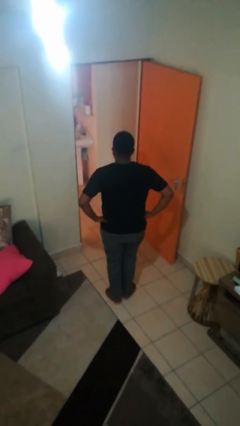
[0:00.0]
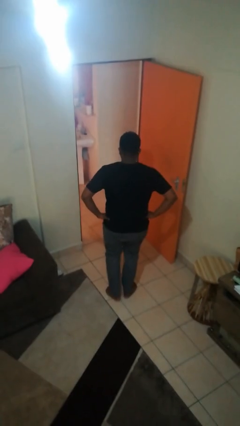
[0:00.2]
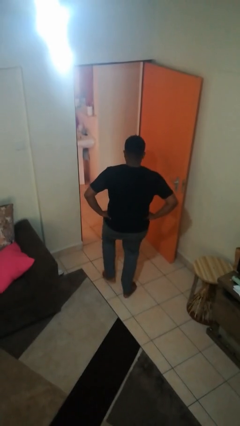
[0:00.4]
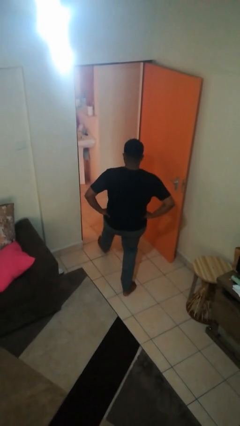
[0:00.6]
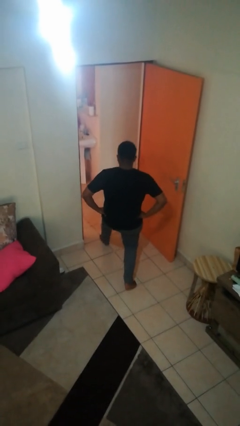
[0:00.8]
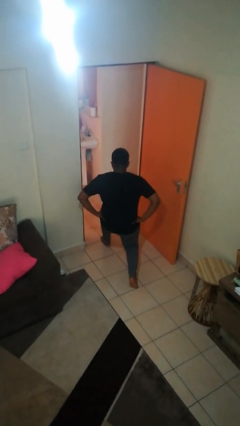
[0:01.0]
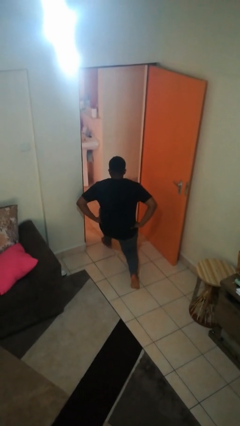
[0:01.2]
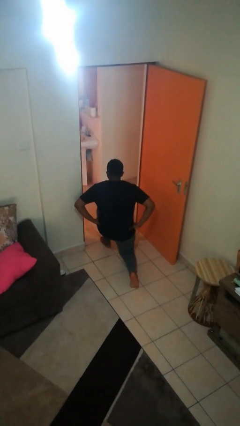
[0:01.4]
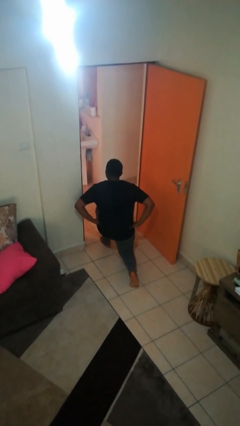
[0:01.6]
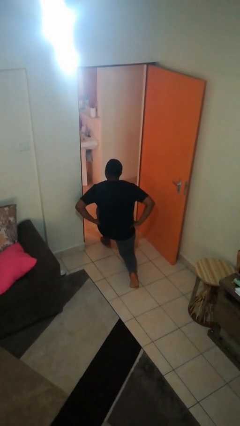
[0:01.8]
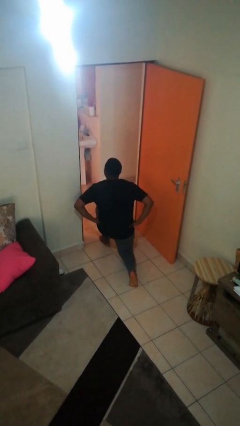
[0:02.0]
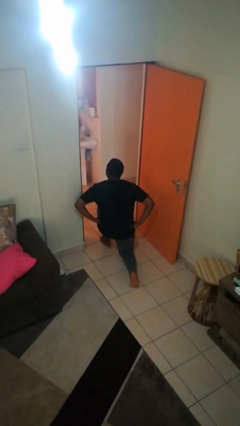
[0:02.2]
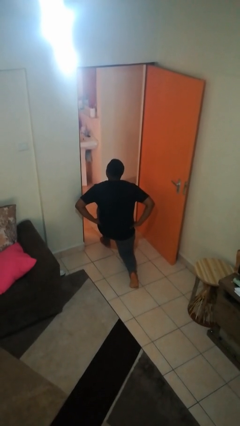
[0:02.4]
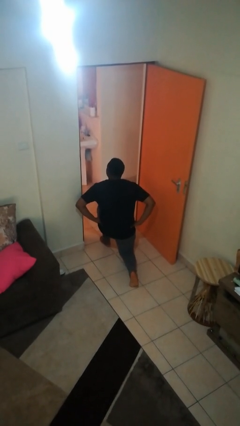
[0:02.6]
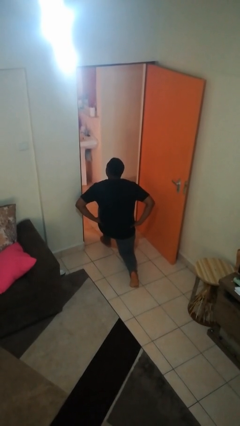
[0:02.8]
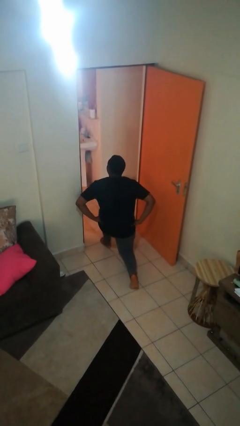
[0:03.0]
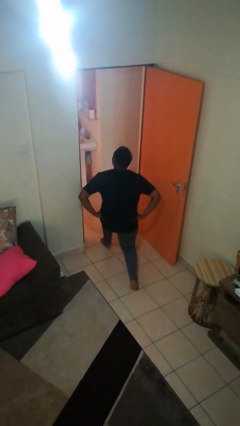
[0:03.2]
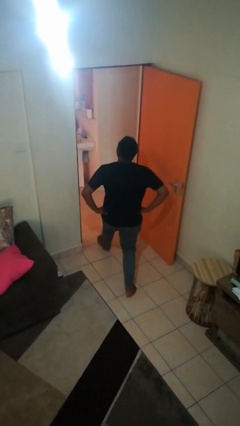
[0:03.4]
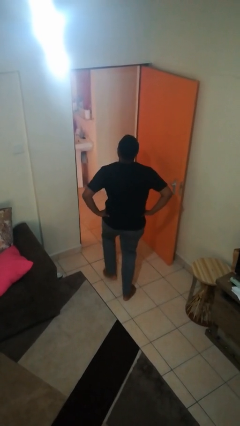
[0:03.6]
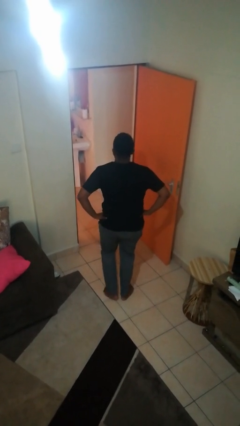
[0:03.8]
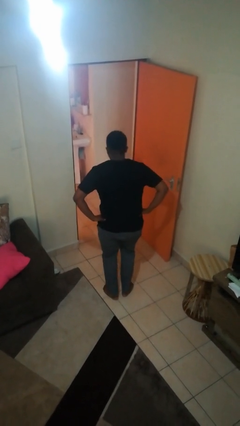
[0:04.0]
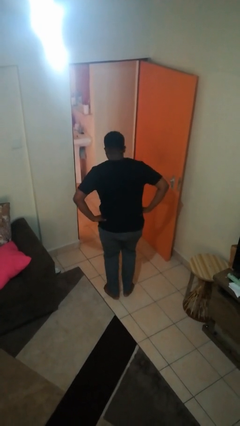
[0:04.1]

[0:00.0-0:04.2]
person exercises with lunges

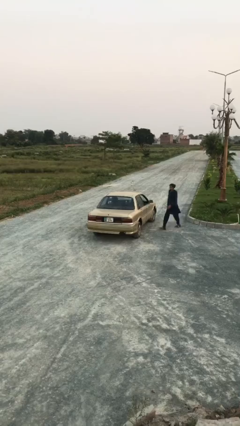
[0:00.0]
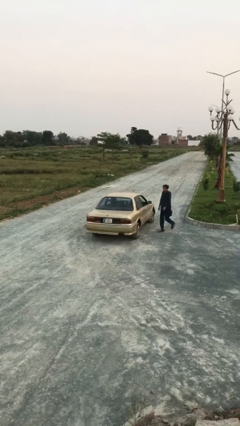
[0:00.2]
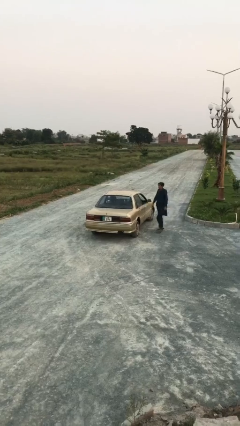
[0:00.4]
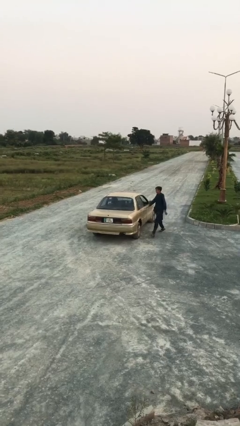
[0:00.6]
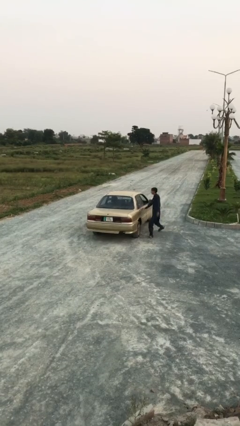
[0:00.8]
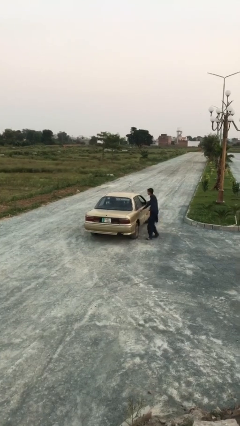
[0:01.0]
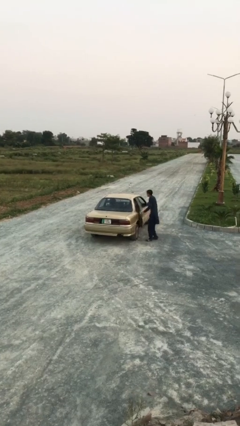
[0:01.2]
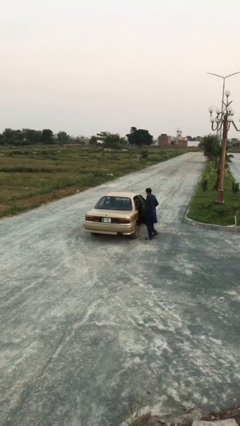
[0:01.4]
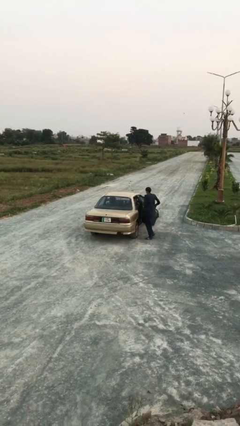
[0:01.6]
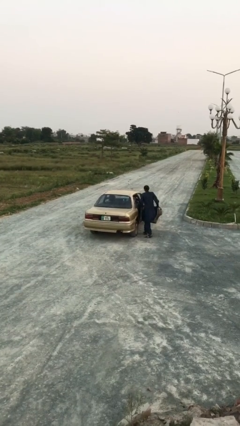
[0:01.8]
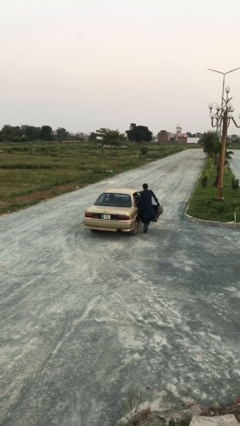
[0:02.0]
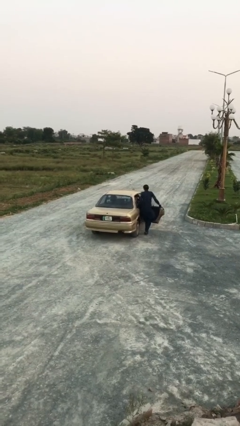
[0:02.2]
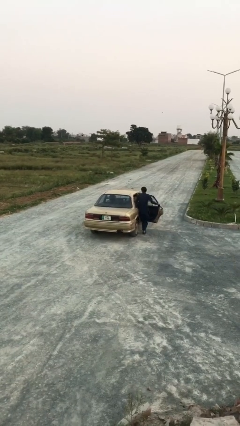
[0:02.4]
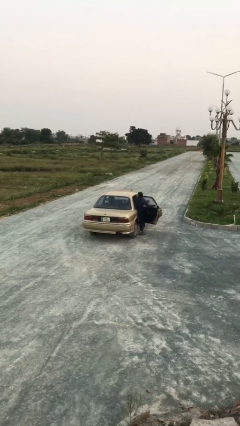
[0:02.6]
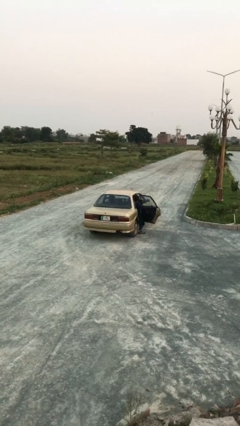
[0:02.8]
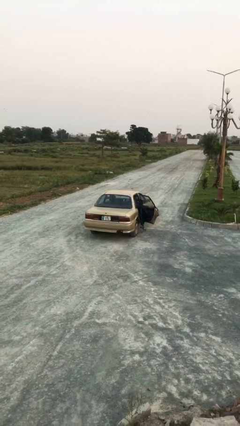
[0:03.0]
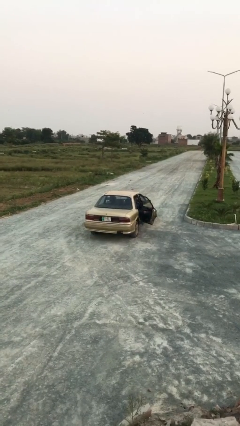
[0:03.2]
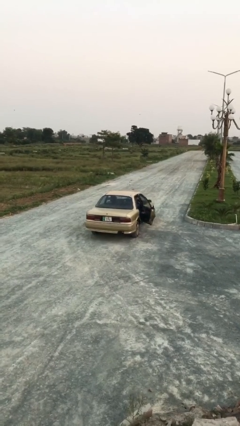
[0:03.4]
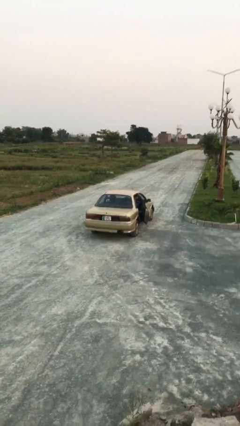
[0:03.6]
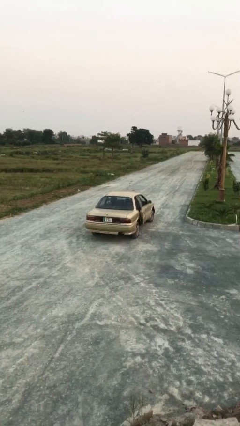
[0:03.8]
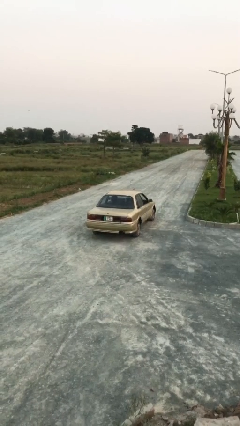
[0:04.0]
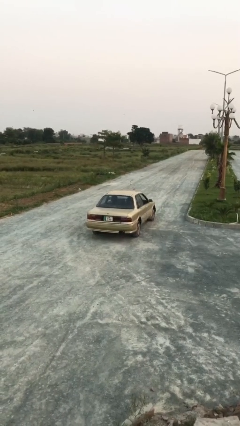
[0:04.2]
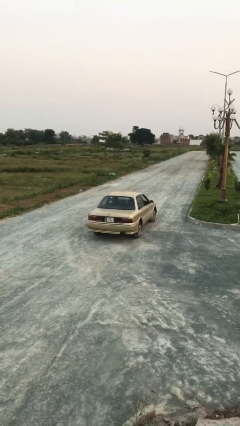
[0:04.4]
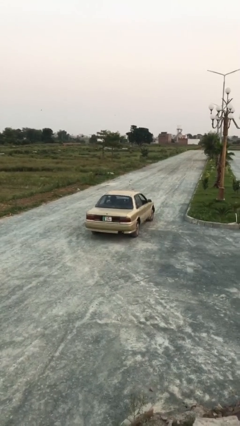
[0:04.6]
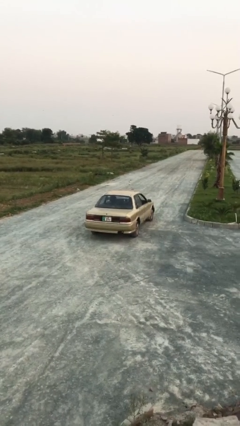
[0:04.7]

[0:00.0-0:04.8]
car picks up person

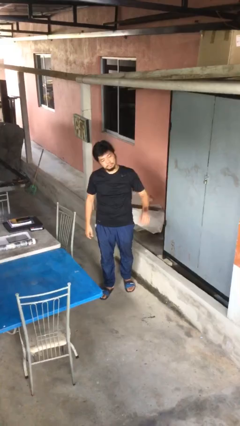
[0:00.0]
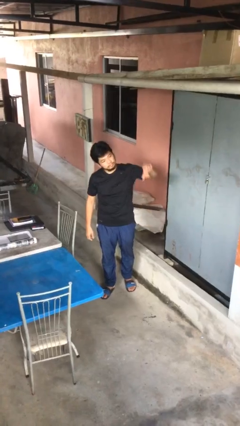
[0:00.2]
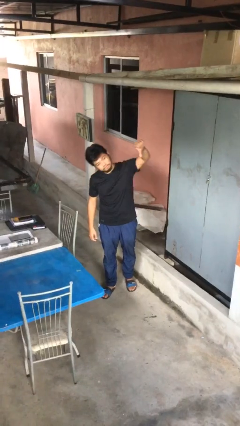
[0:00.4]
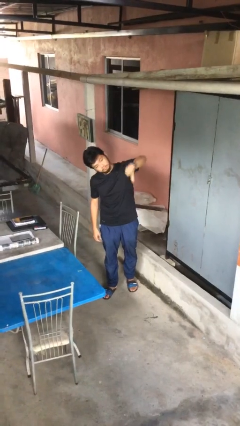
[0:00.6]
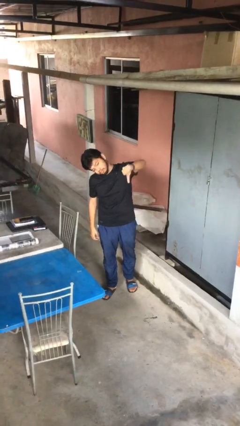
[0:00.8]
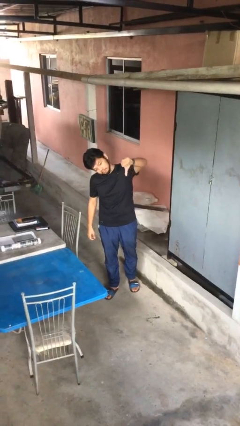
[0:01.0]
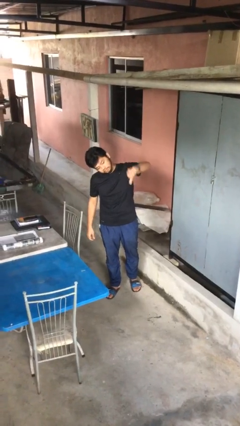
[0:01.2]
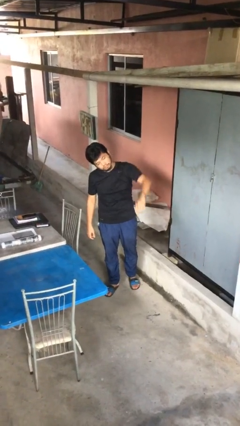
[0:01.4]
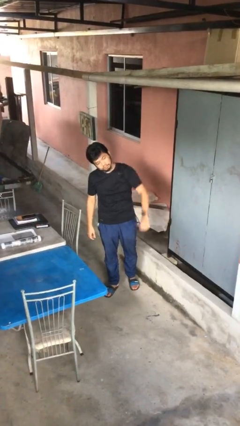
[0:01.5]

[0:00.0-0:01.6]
person gestures thumbs down

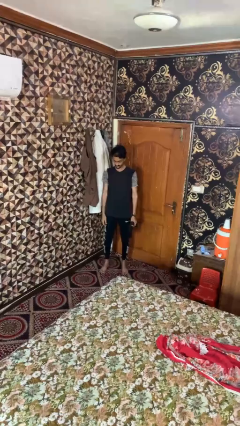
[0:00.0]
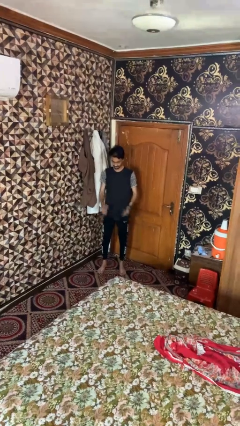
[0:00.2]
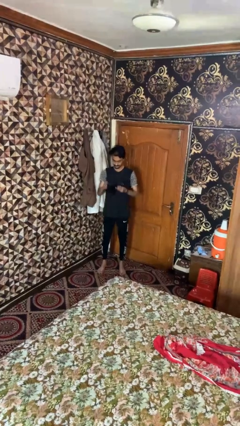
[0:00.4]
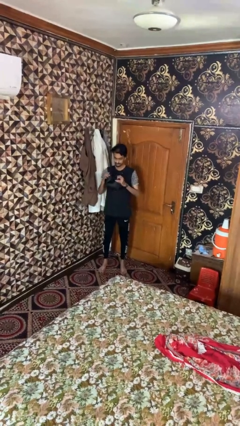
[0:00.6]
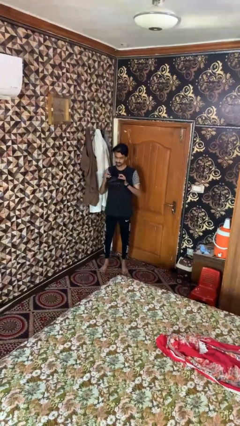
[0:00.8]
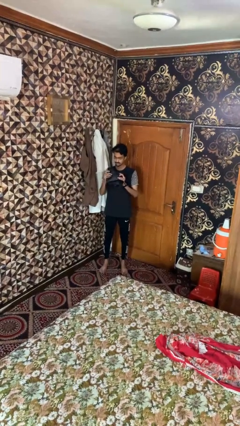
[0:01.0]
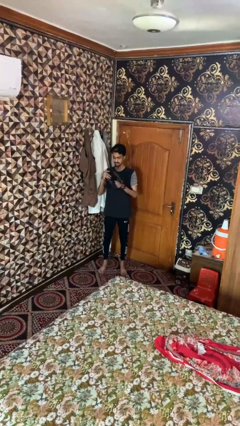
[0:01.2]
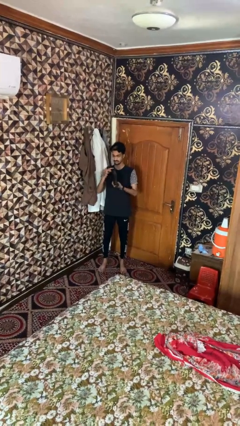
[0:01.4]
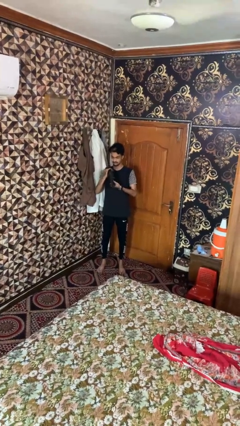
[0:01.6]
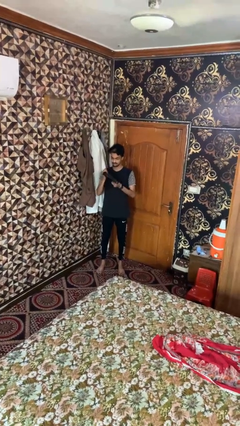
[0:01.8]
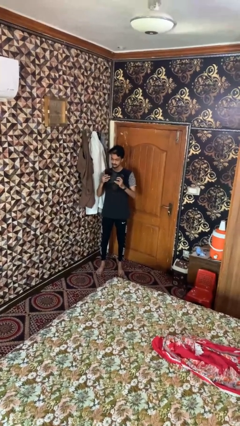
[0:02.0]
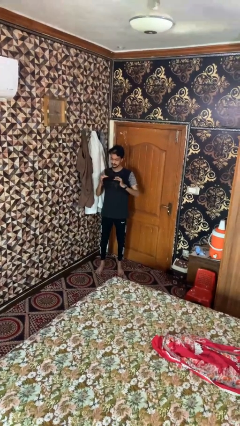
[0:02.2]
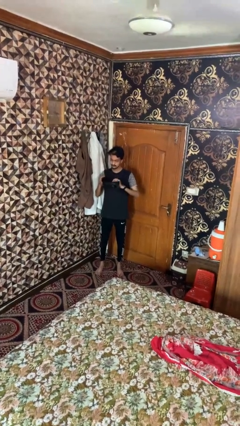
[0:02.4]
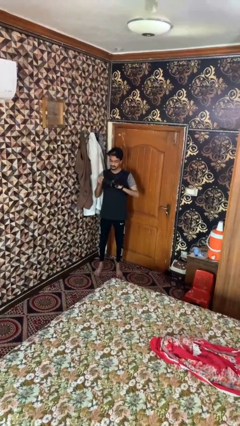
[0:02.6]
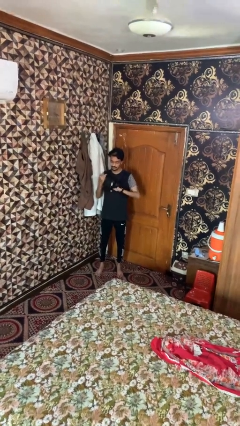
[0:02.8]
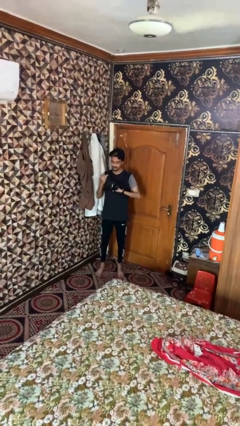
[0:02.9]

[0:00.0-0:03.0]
person squeezes object

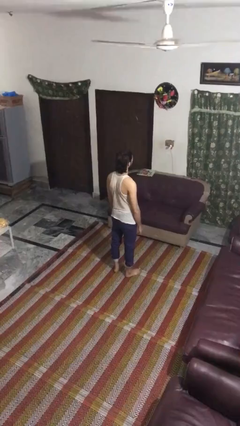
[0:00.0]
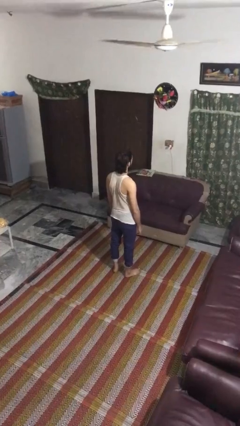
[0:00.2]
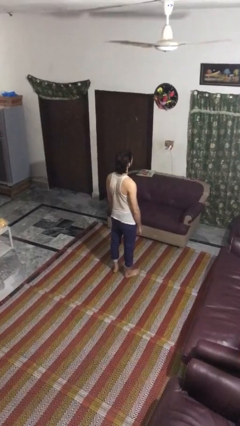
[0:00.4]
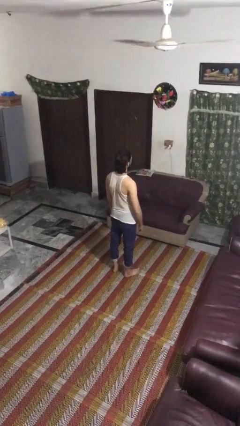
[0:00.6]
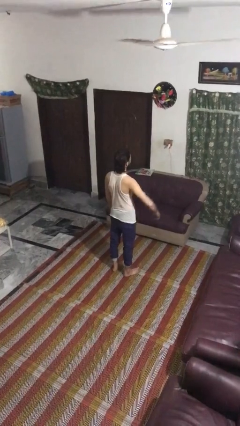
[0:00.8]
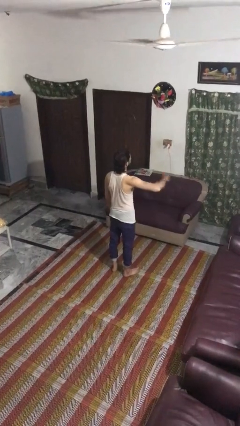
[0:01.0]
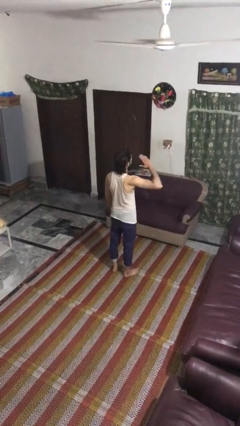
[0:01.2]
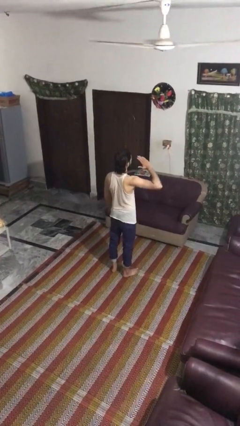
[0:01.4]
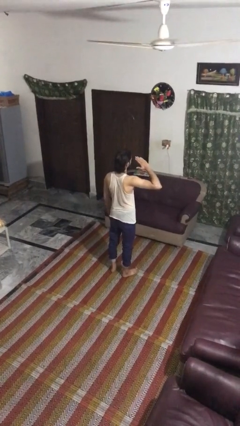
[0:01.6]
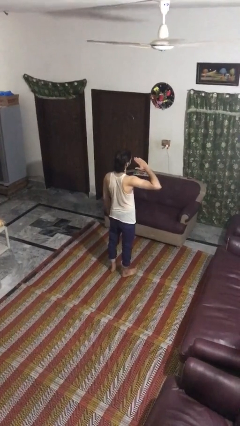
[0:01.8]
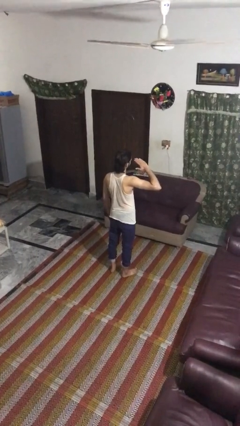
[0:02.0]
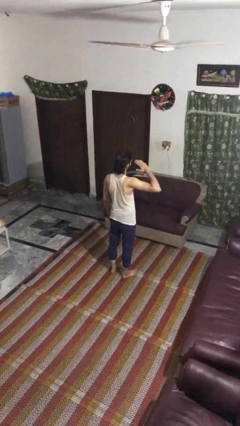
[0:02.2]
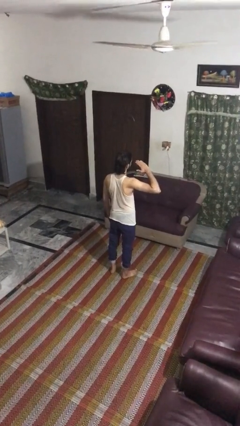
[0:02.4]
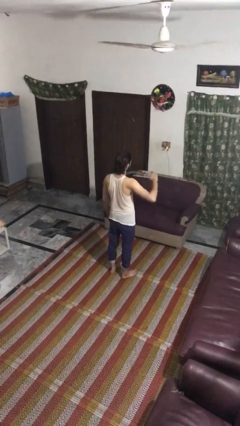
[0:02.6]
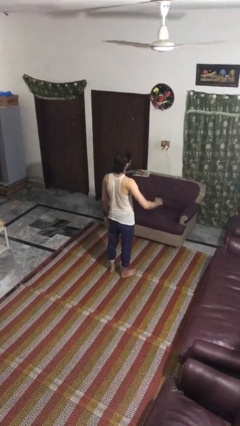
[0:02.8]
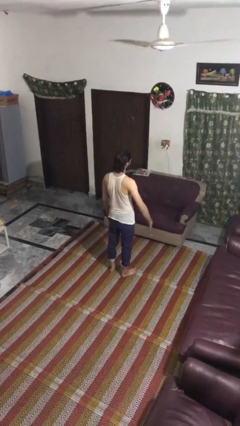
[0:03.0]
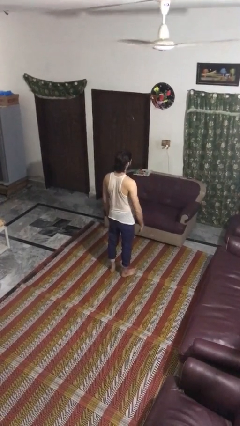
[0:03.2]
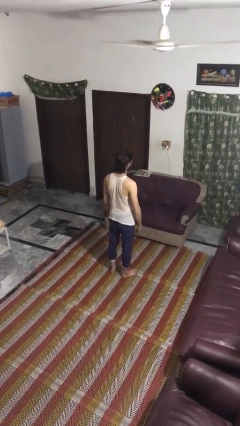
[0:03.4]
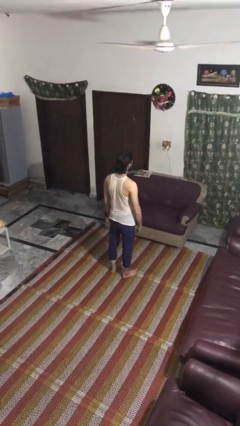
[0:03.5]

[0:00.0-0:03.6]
person salutes

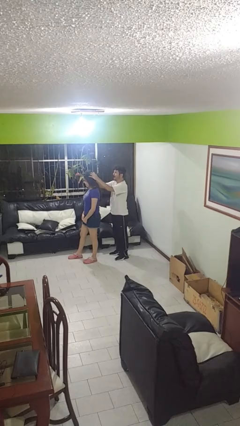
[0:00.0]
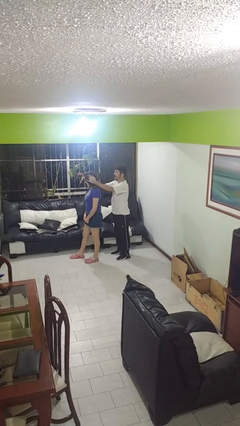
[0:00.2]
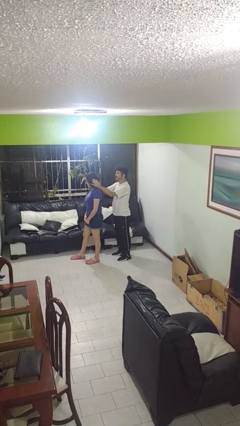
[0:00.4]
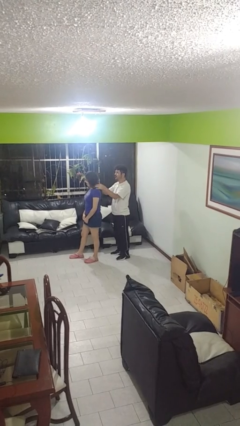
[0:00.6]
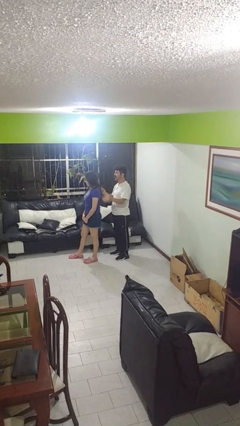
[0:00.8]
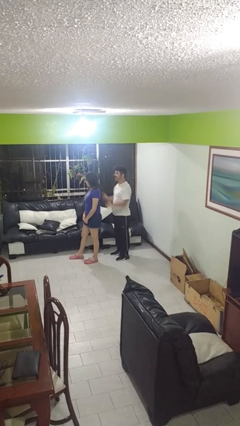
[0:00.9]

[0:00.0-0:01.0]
person grabs person by hair
